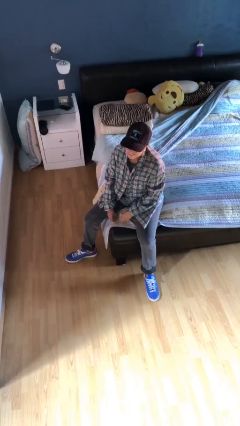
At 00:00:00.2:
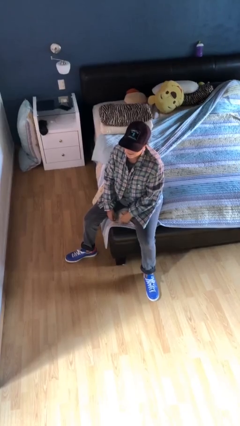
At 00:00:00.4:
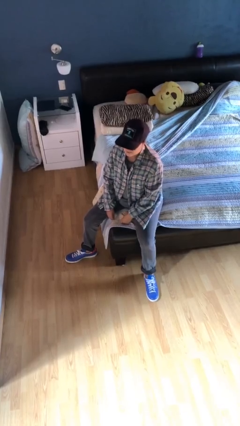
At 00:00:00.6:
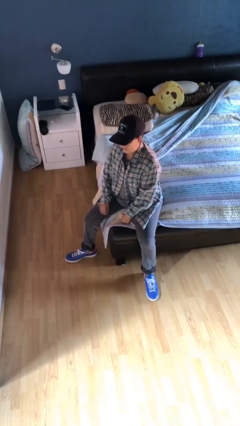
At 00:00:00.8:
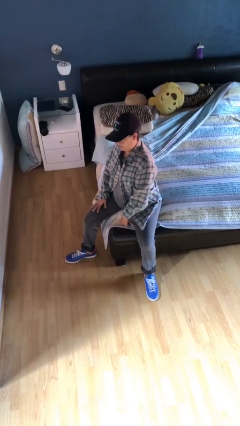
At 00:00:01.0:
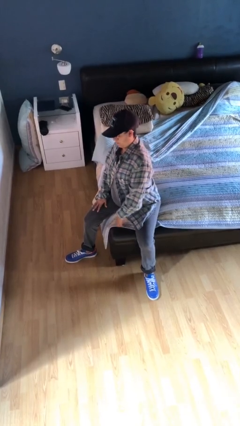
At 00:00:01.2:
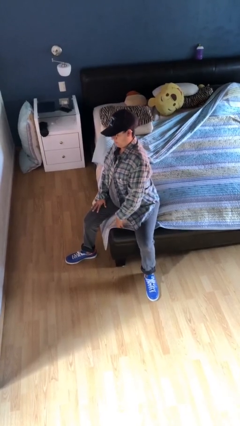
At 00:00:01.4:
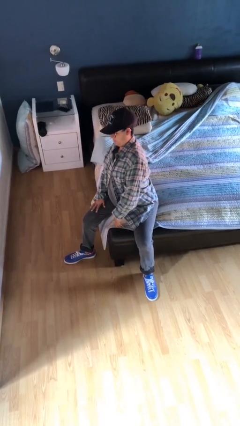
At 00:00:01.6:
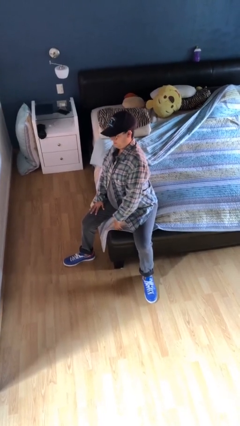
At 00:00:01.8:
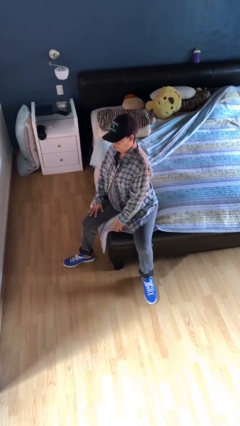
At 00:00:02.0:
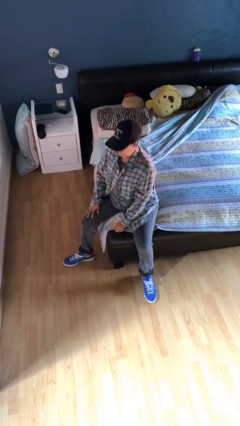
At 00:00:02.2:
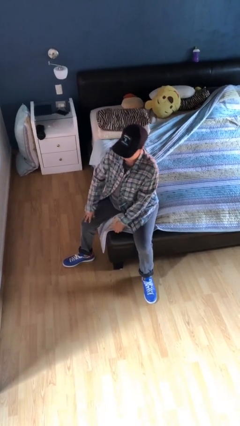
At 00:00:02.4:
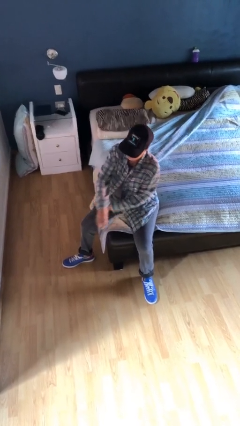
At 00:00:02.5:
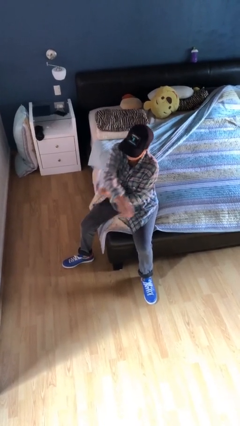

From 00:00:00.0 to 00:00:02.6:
person stretches back

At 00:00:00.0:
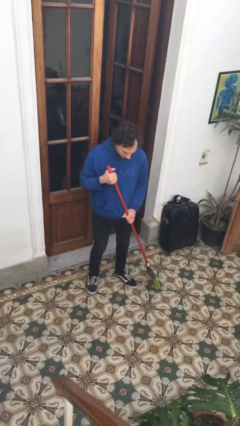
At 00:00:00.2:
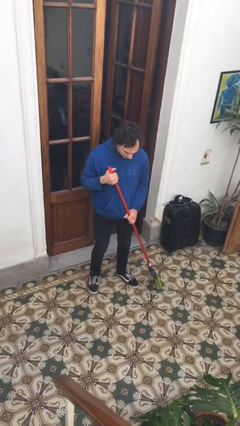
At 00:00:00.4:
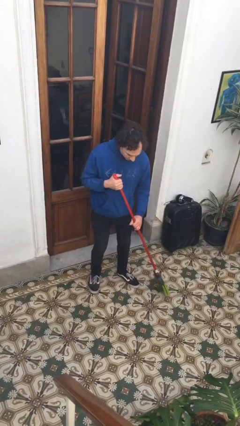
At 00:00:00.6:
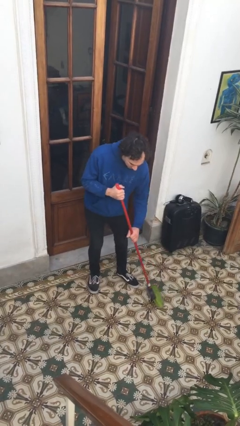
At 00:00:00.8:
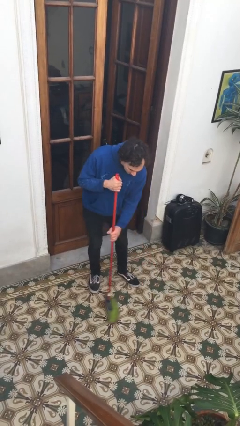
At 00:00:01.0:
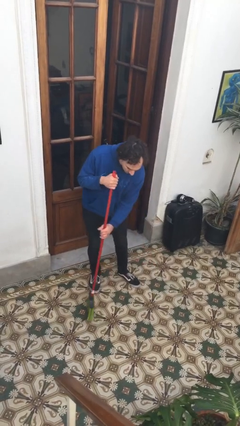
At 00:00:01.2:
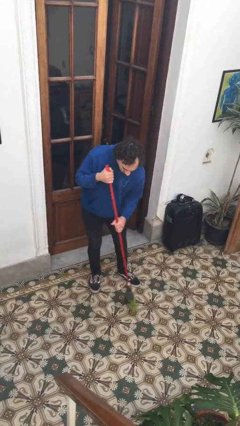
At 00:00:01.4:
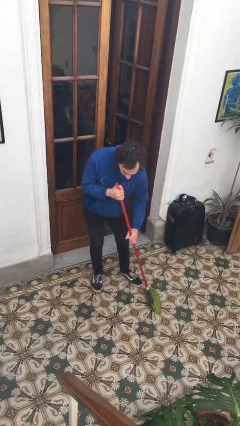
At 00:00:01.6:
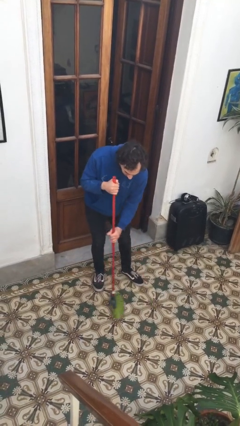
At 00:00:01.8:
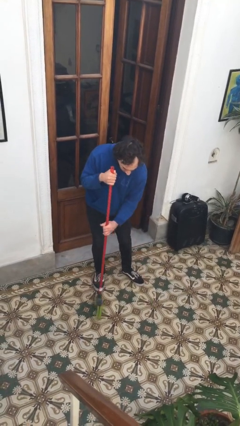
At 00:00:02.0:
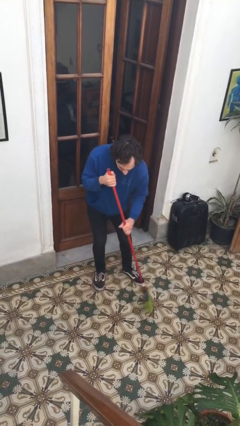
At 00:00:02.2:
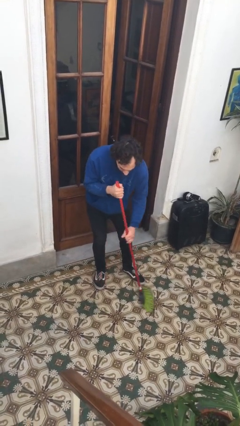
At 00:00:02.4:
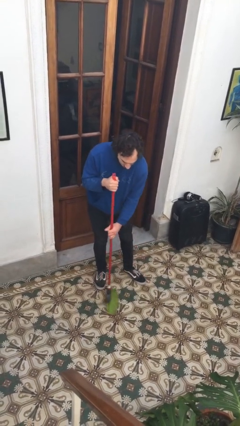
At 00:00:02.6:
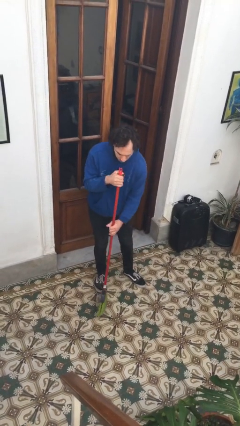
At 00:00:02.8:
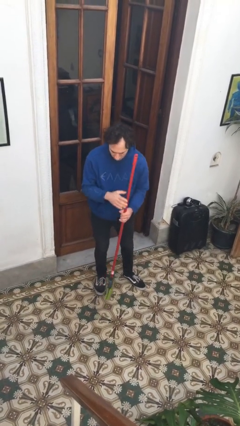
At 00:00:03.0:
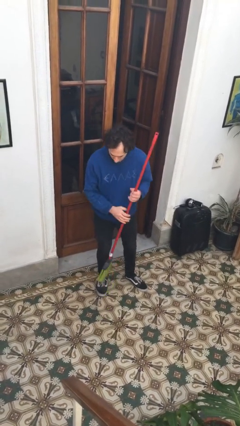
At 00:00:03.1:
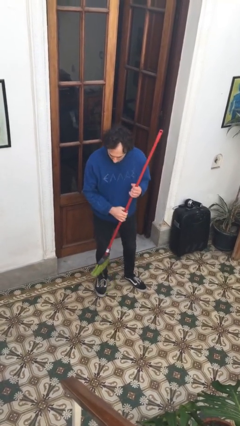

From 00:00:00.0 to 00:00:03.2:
person sweeps floor

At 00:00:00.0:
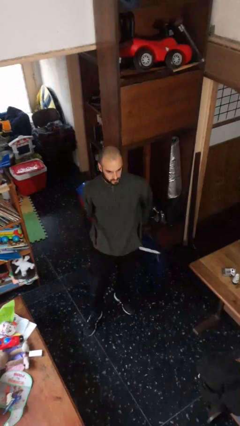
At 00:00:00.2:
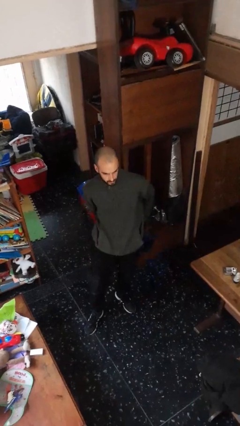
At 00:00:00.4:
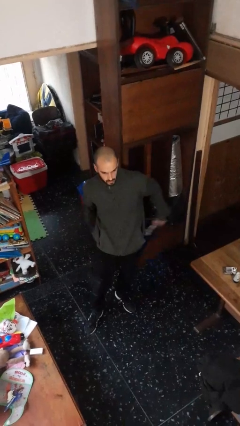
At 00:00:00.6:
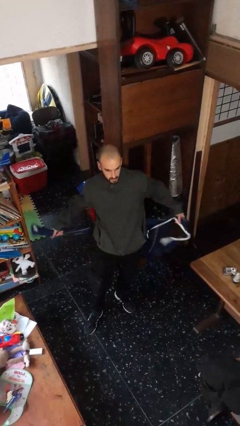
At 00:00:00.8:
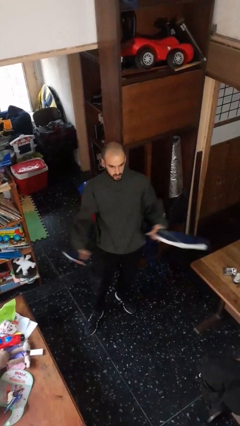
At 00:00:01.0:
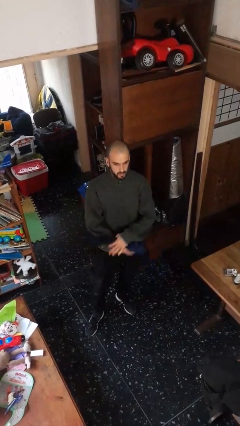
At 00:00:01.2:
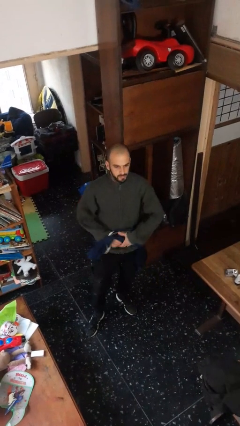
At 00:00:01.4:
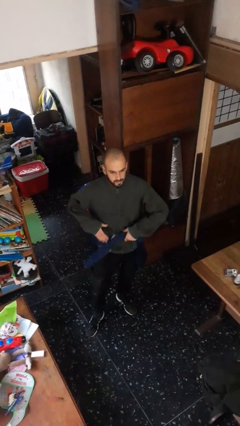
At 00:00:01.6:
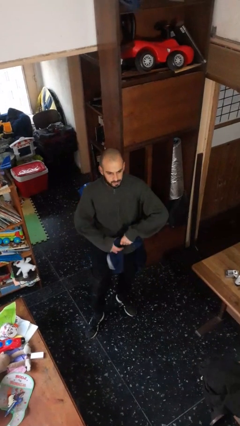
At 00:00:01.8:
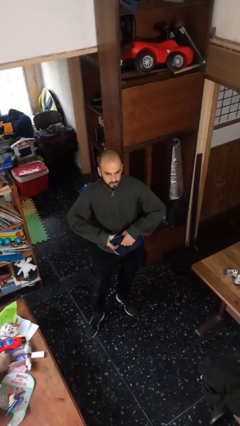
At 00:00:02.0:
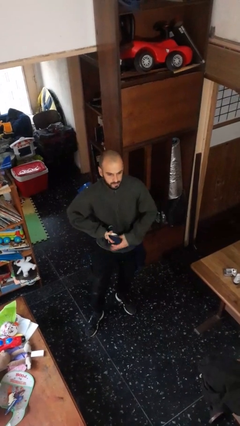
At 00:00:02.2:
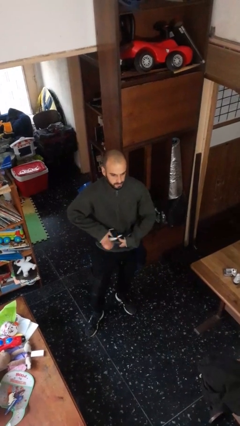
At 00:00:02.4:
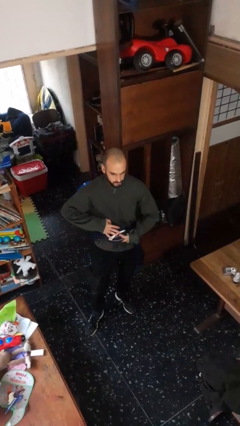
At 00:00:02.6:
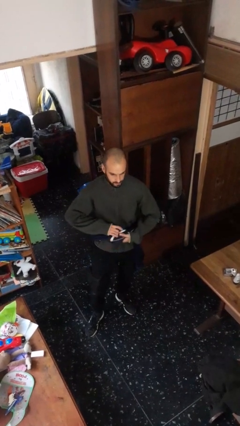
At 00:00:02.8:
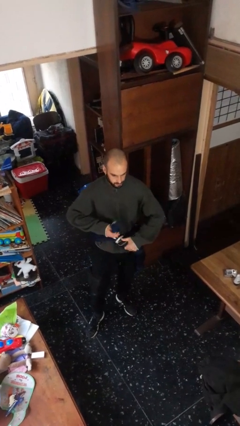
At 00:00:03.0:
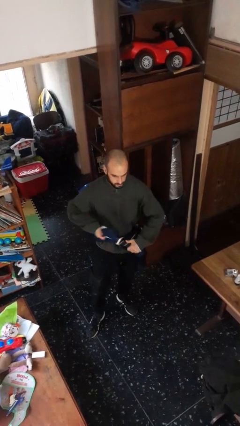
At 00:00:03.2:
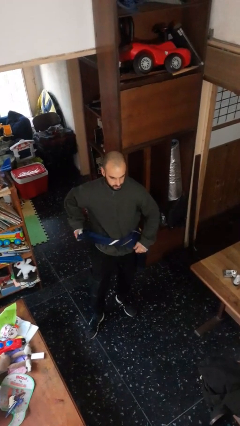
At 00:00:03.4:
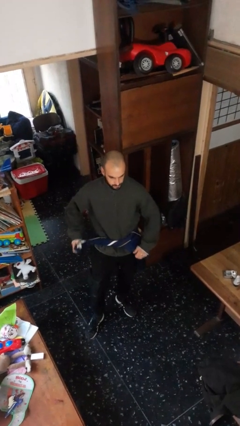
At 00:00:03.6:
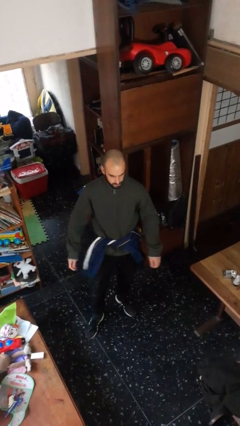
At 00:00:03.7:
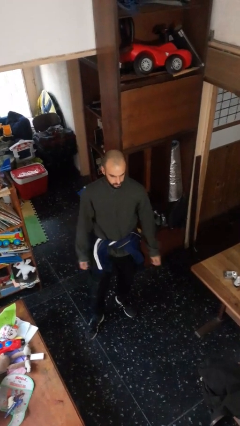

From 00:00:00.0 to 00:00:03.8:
person ties jacket around waist

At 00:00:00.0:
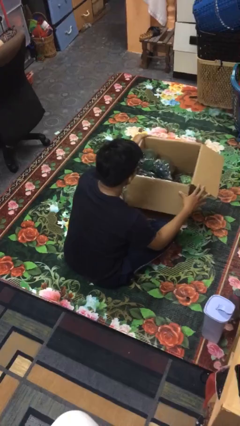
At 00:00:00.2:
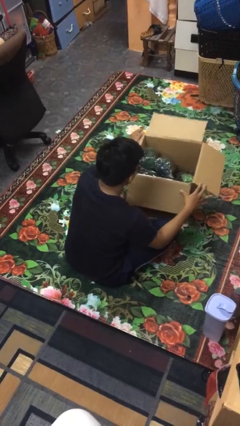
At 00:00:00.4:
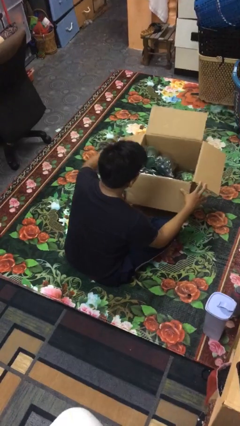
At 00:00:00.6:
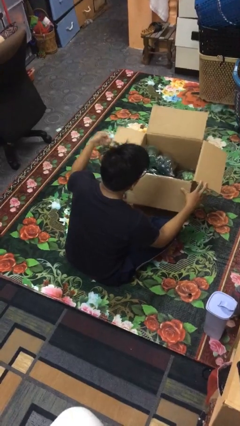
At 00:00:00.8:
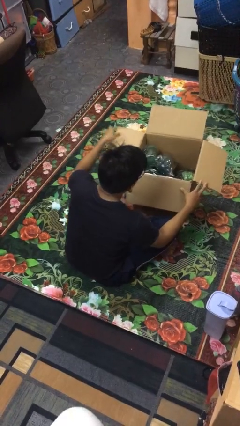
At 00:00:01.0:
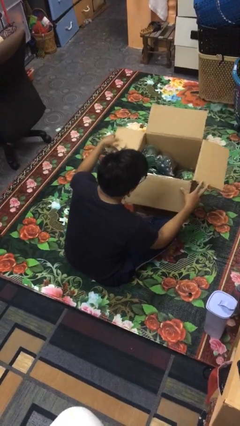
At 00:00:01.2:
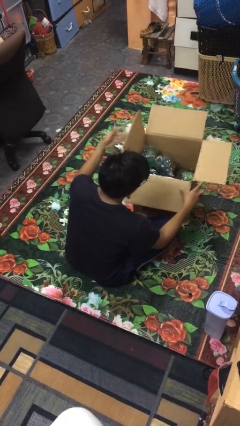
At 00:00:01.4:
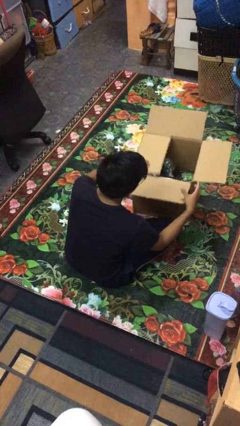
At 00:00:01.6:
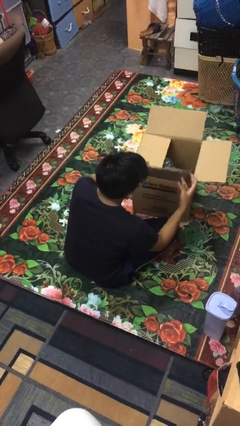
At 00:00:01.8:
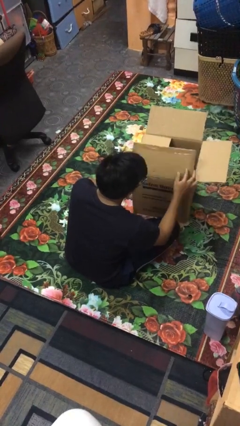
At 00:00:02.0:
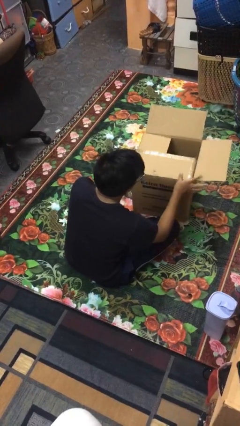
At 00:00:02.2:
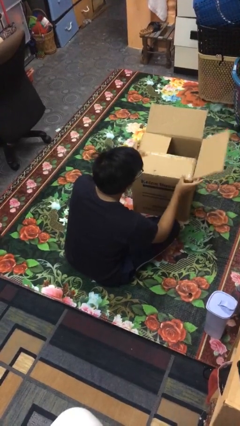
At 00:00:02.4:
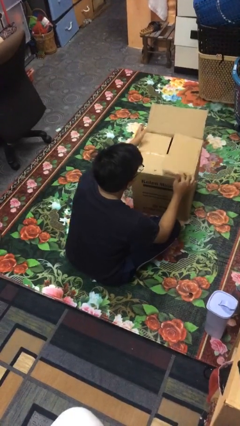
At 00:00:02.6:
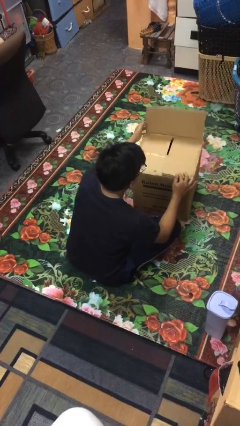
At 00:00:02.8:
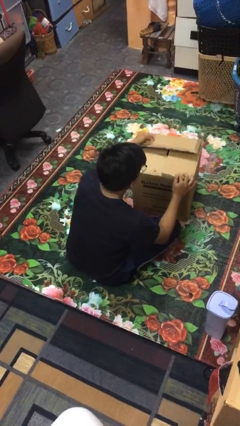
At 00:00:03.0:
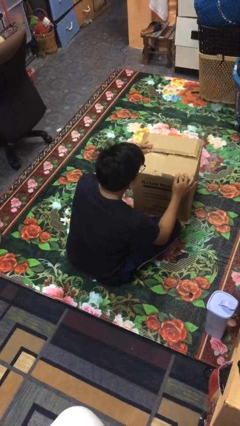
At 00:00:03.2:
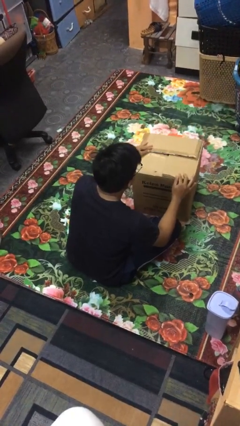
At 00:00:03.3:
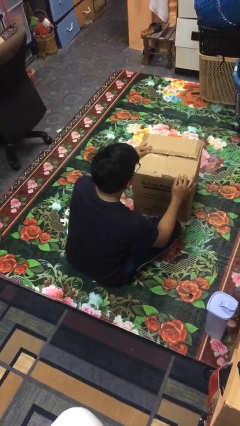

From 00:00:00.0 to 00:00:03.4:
person closes box

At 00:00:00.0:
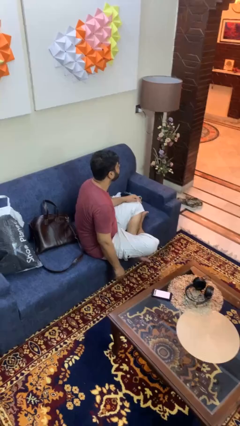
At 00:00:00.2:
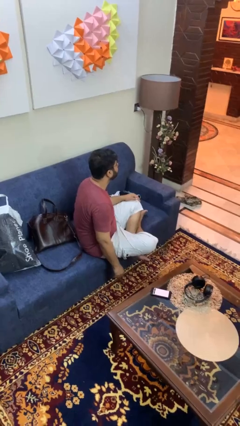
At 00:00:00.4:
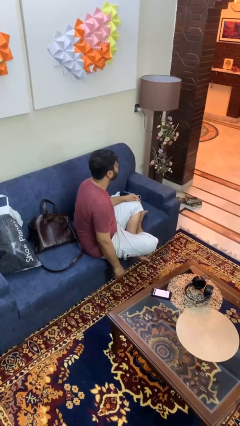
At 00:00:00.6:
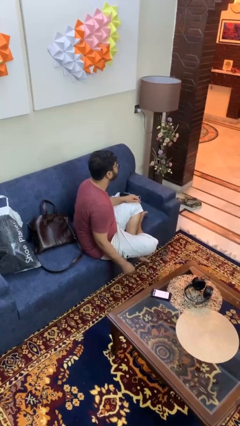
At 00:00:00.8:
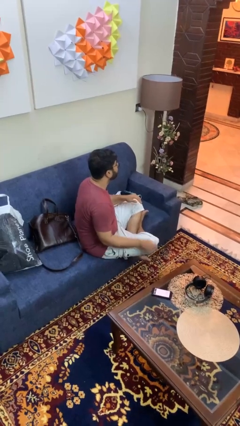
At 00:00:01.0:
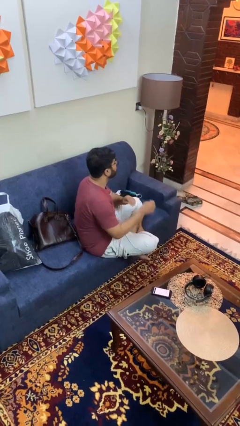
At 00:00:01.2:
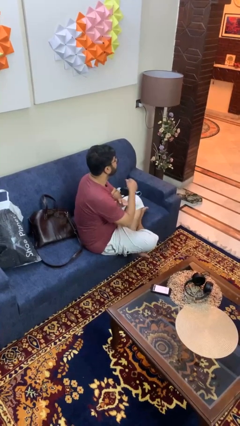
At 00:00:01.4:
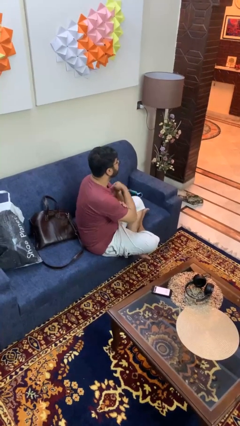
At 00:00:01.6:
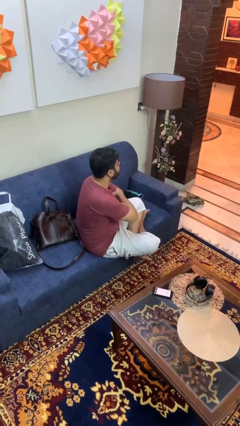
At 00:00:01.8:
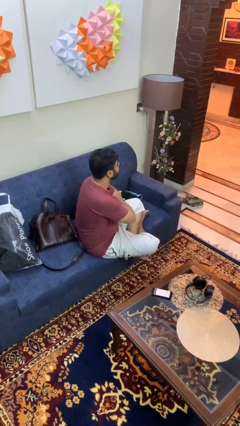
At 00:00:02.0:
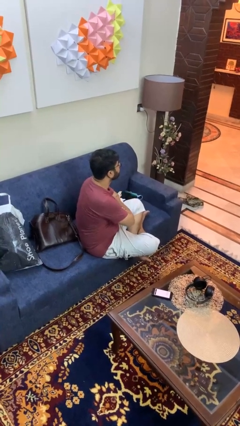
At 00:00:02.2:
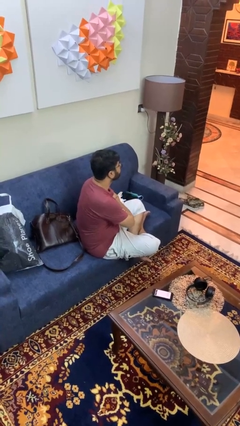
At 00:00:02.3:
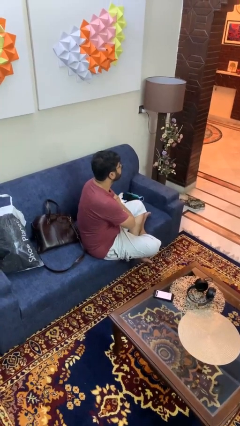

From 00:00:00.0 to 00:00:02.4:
person crosses arms

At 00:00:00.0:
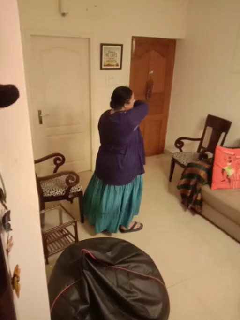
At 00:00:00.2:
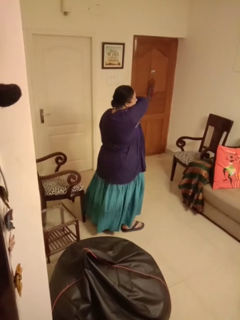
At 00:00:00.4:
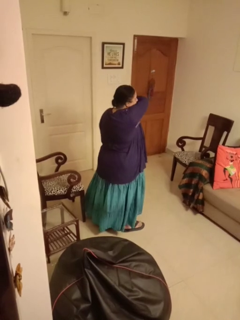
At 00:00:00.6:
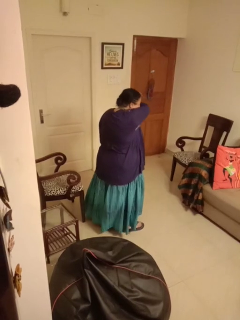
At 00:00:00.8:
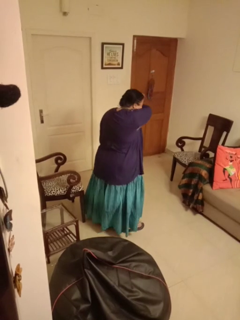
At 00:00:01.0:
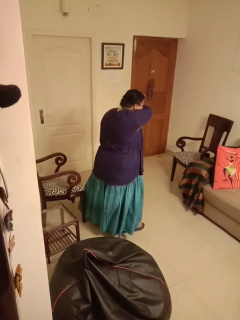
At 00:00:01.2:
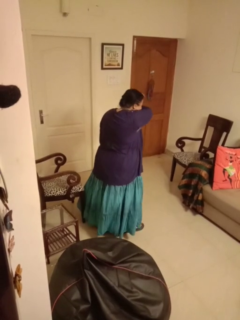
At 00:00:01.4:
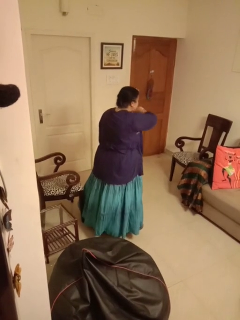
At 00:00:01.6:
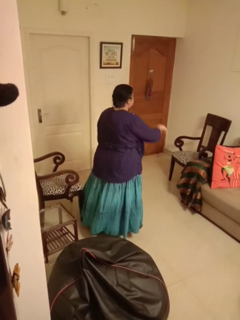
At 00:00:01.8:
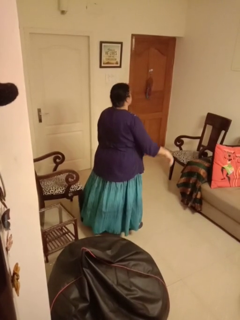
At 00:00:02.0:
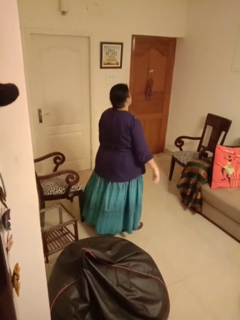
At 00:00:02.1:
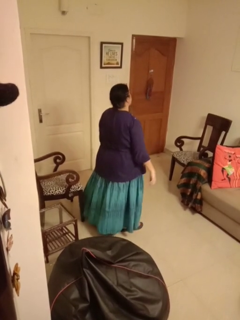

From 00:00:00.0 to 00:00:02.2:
person sneezes into arm
